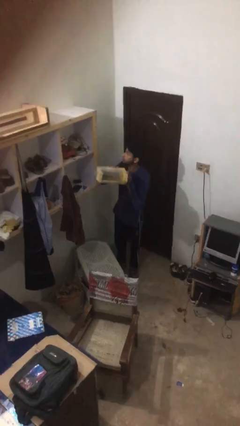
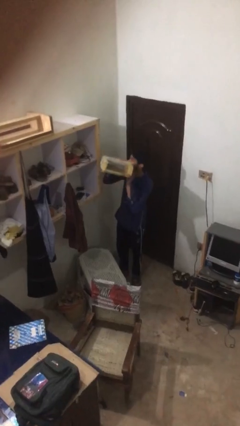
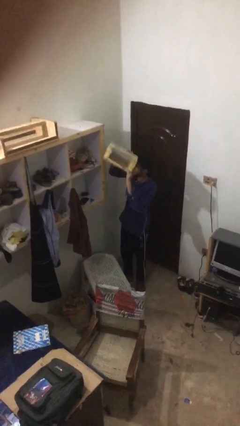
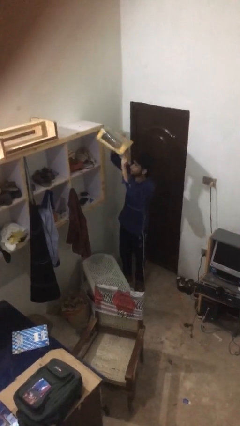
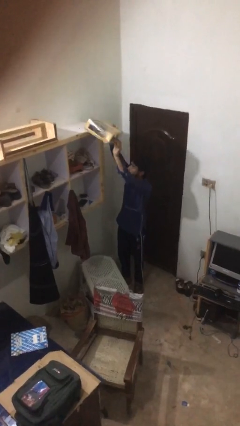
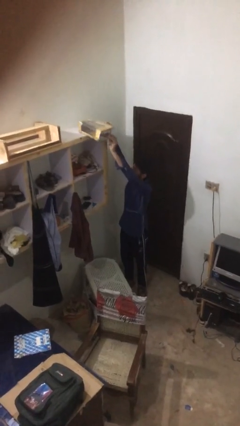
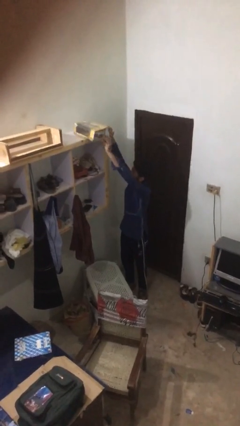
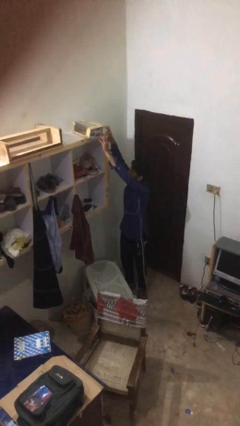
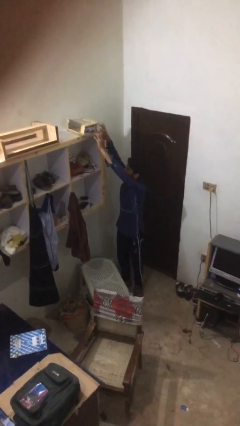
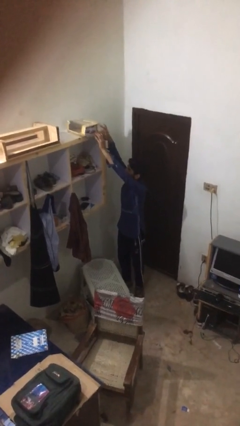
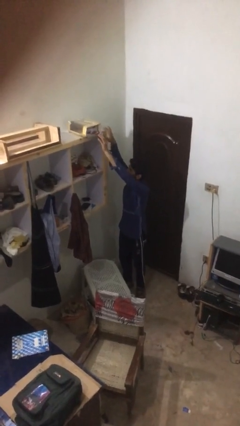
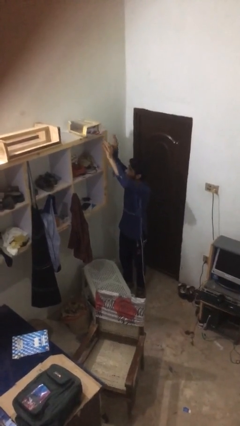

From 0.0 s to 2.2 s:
person puts down object on shelf

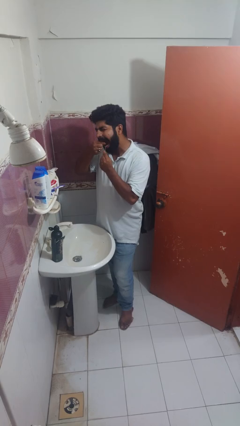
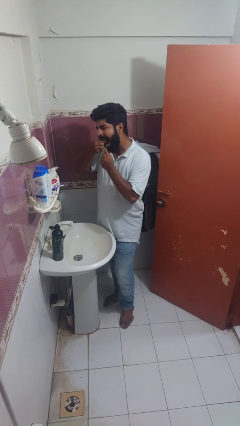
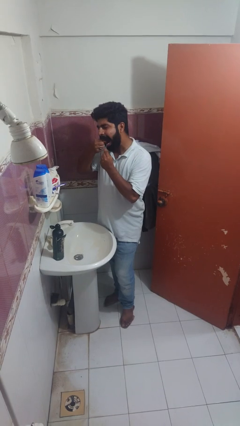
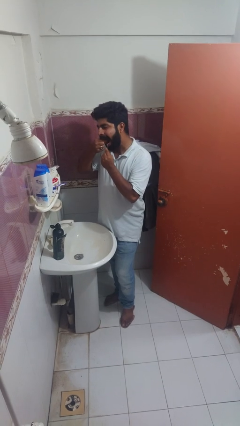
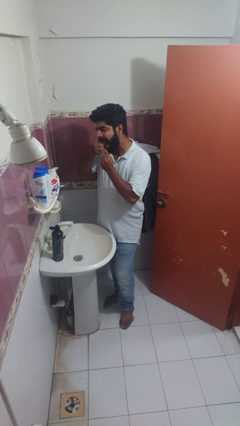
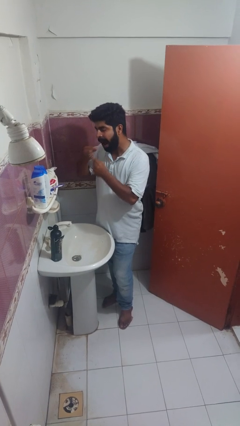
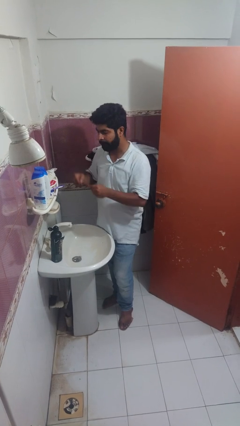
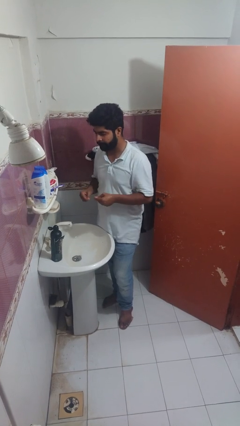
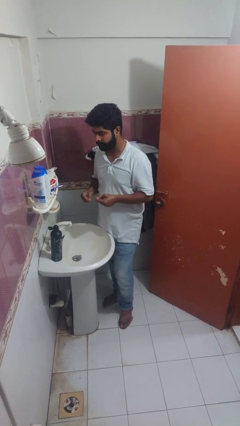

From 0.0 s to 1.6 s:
person flosses

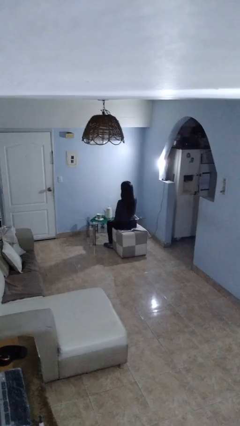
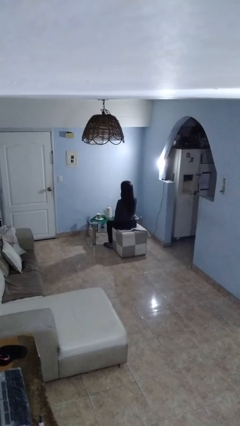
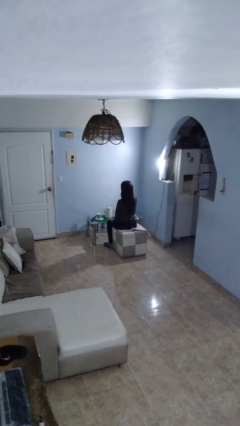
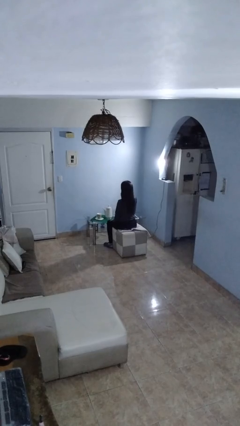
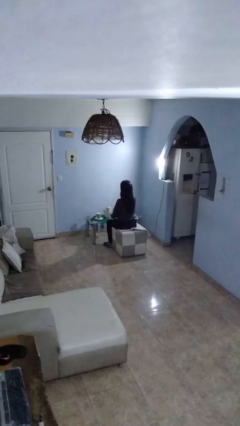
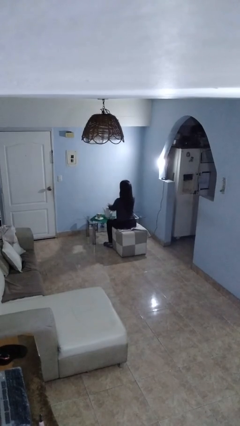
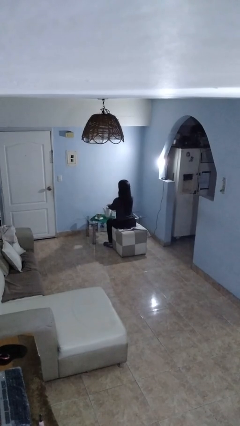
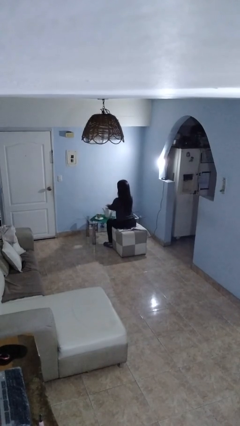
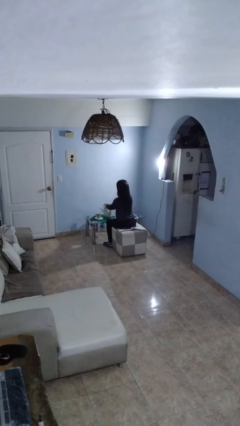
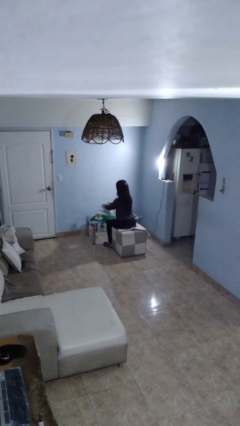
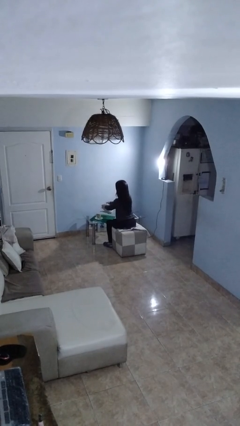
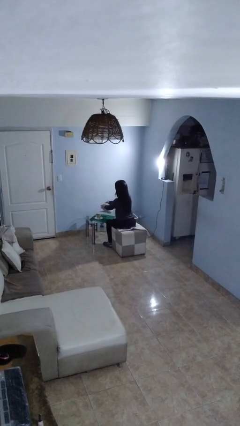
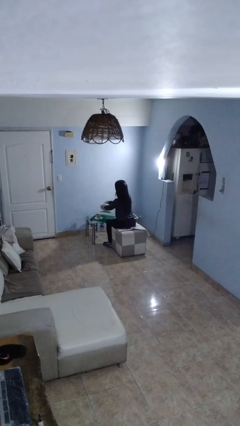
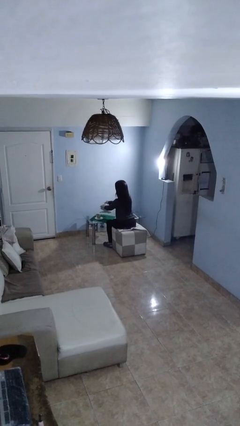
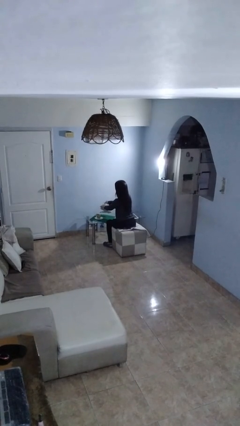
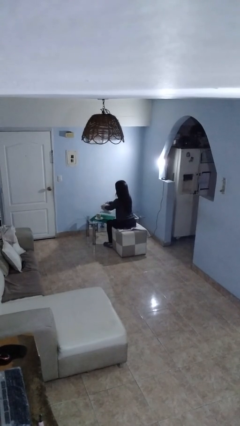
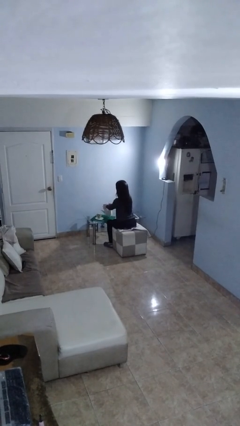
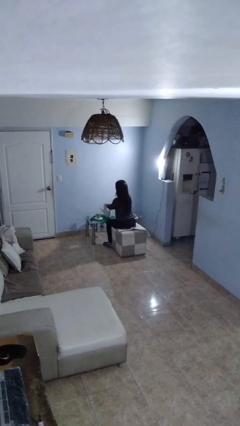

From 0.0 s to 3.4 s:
person pours coffee into mug

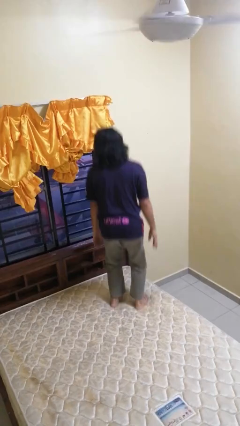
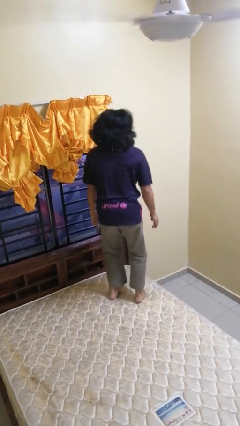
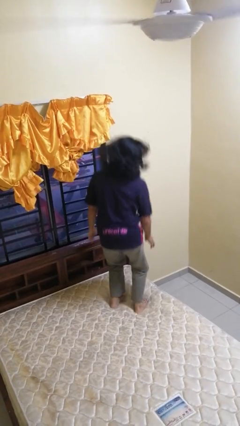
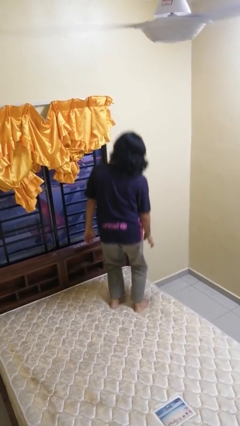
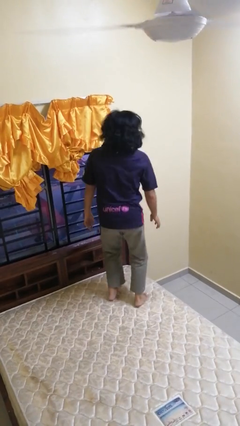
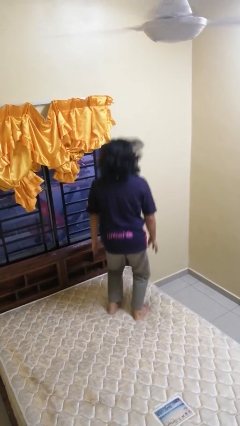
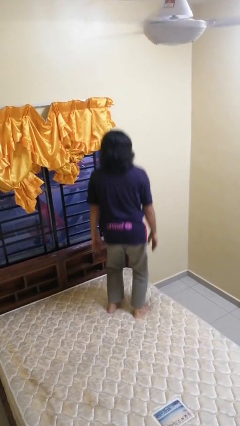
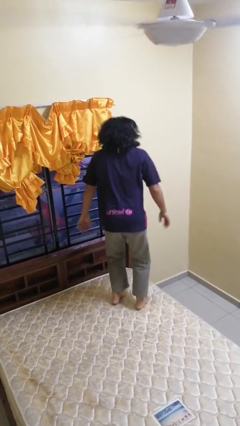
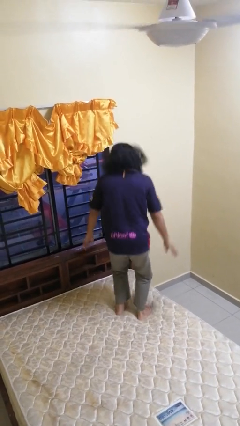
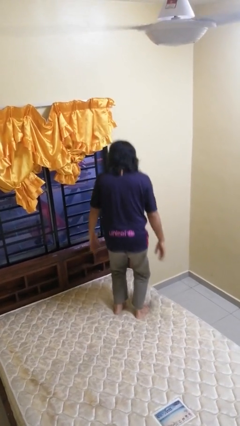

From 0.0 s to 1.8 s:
person jumps on bed

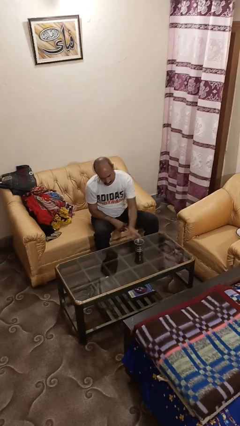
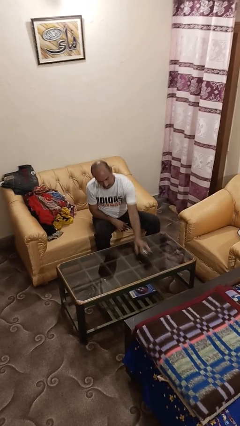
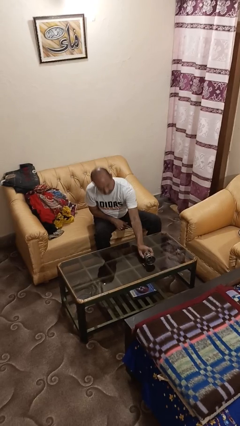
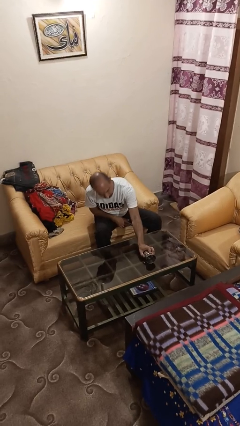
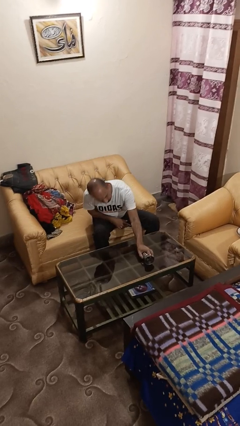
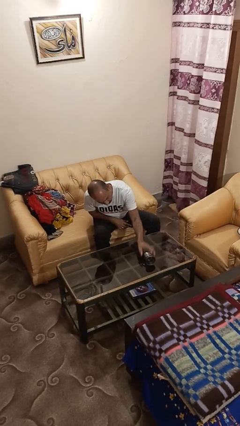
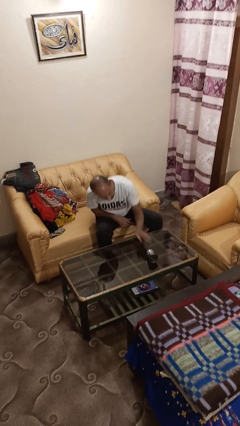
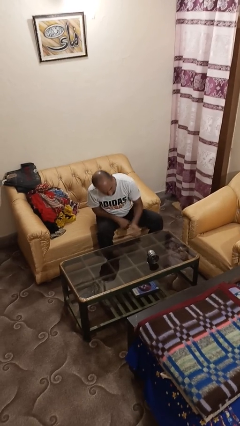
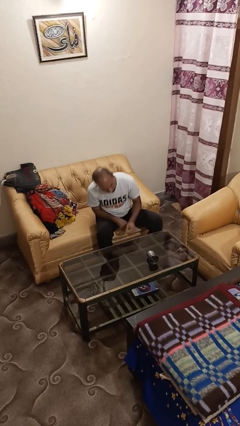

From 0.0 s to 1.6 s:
person knocks over glass

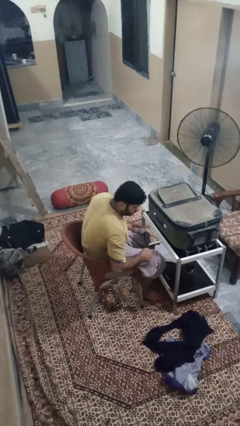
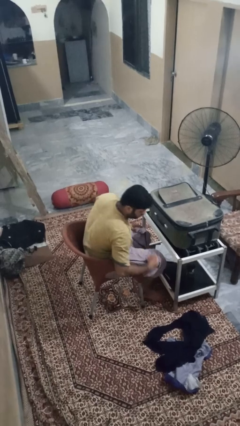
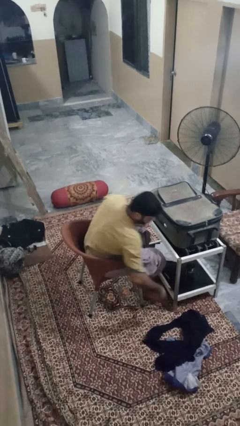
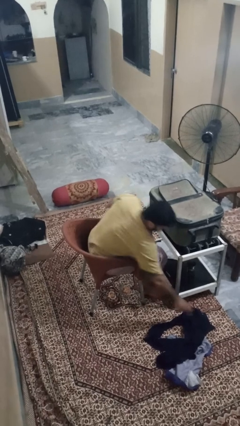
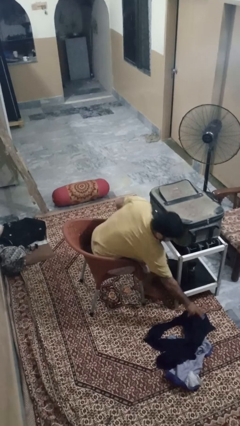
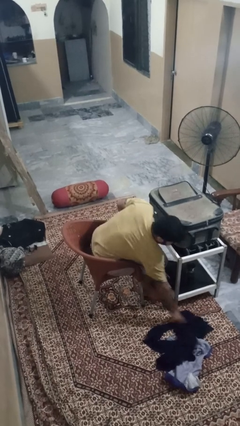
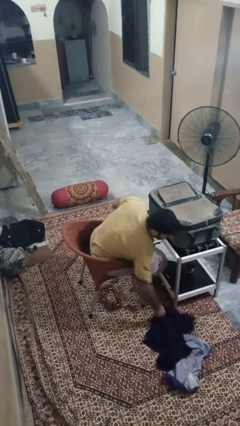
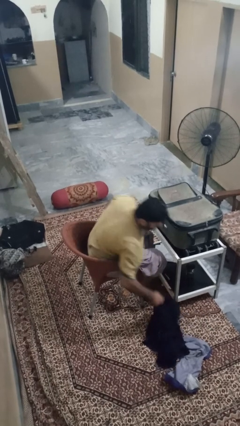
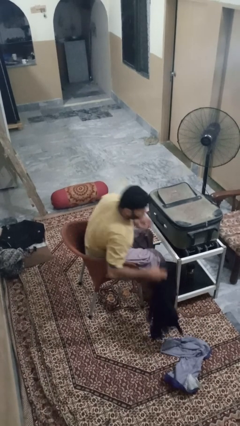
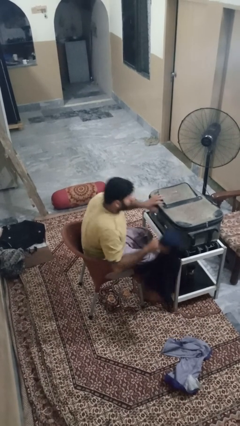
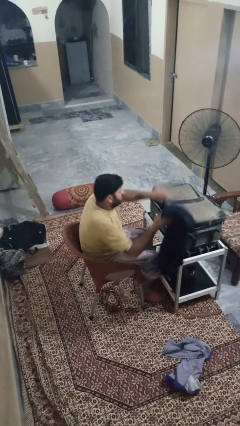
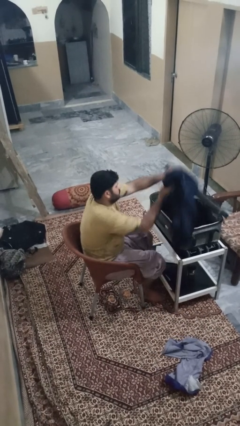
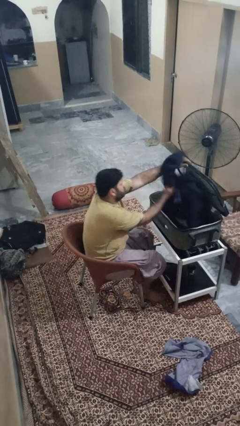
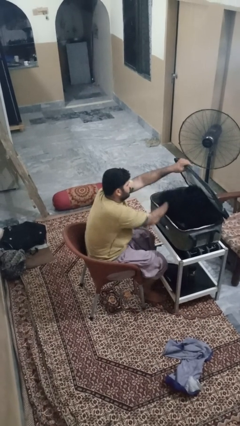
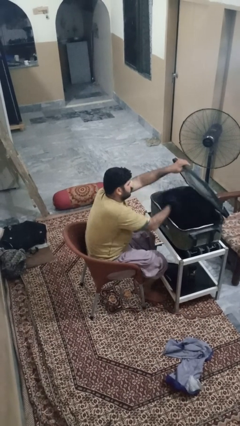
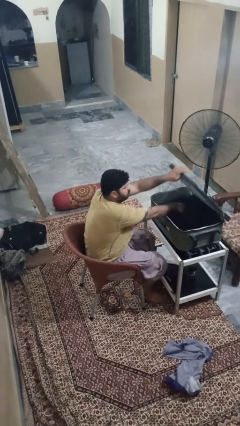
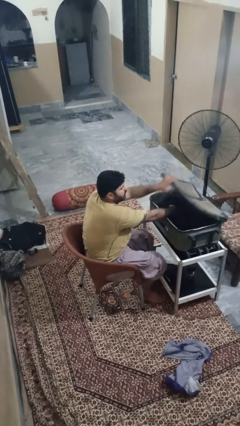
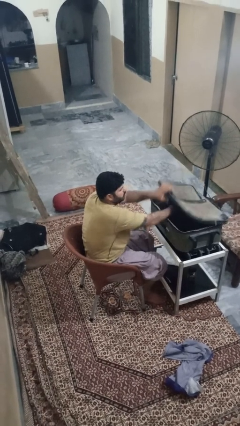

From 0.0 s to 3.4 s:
person loads clothes into suitcase

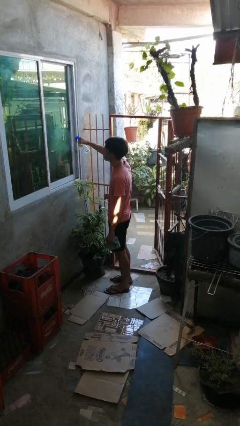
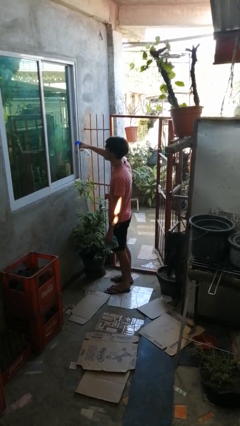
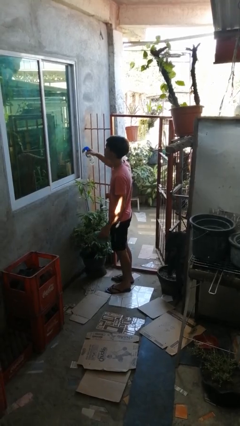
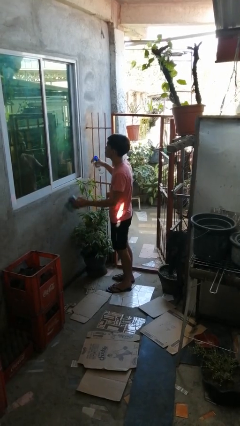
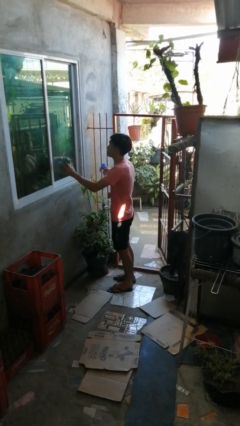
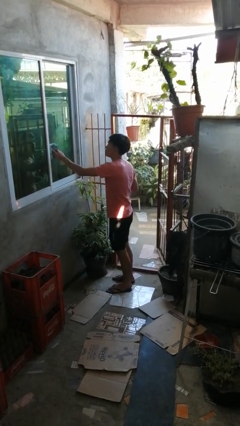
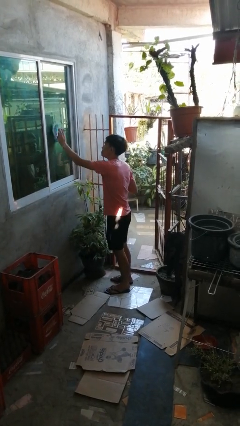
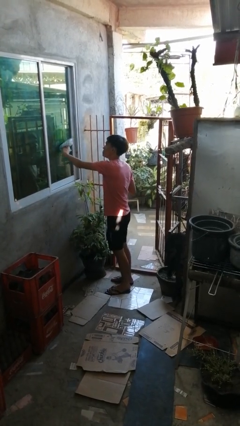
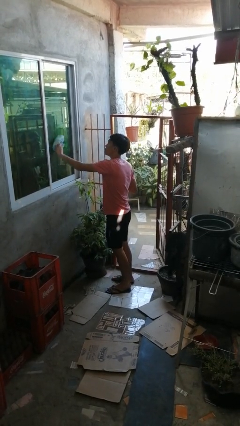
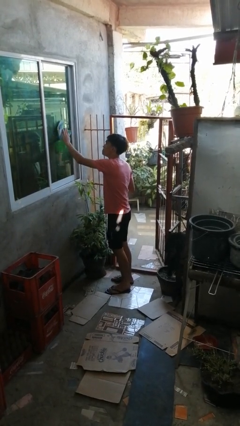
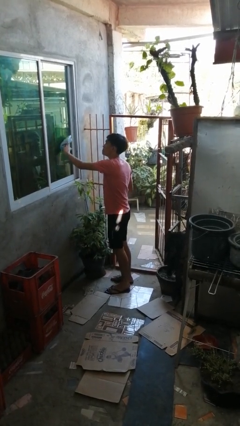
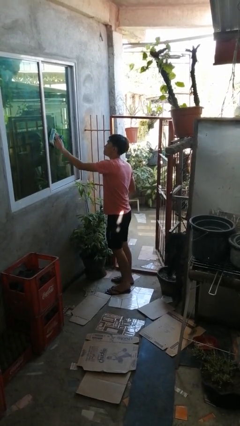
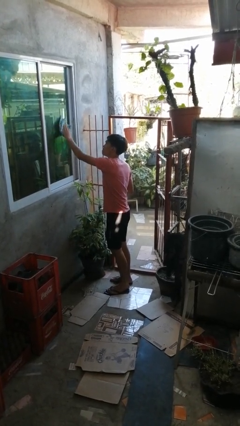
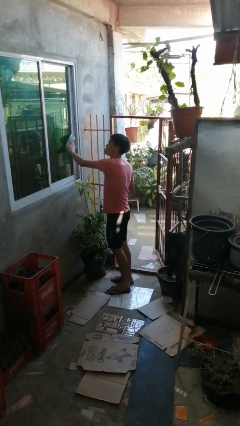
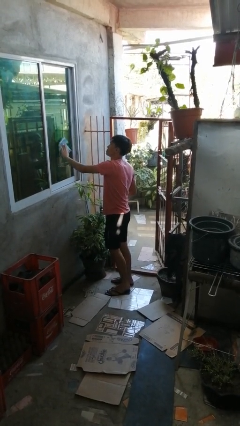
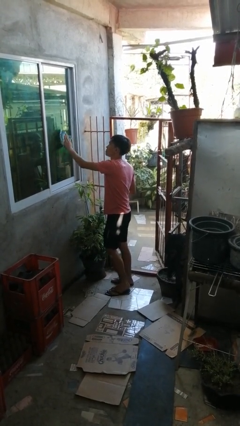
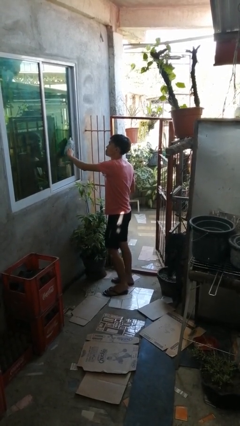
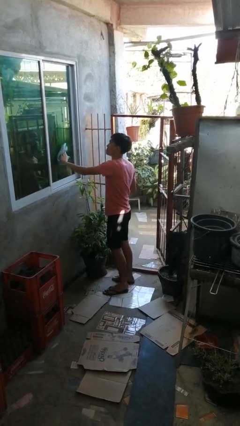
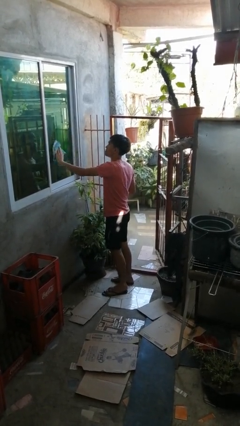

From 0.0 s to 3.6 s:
person washes window
